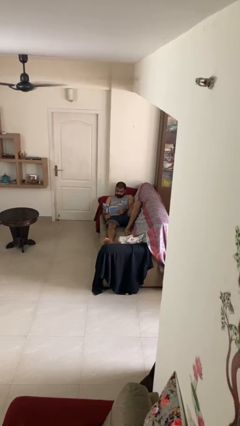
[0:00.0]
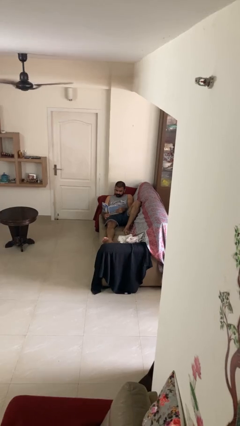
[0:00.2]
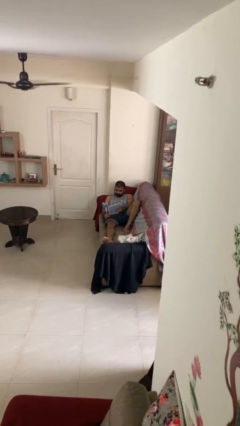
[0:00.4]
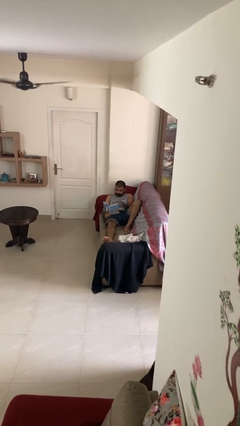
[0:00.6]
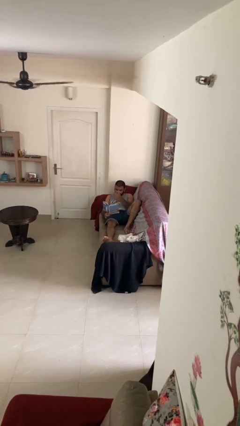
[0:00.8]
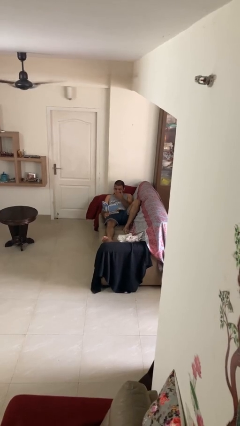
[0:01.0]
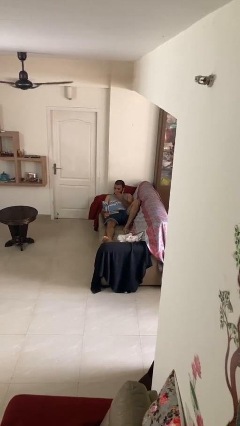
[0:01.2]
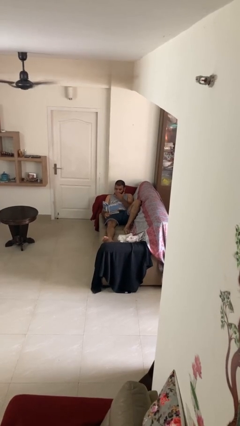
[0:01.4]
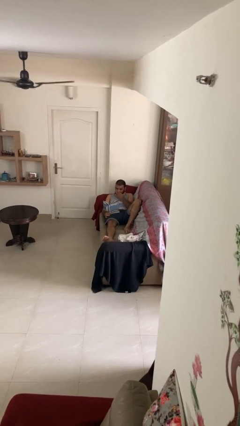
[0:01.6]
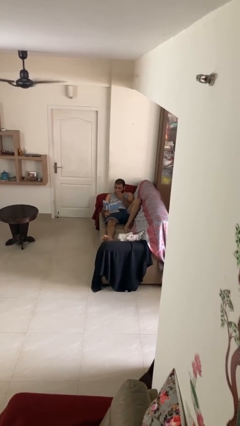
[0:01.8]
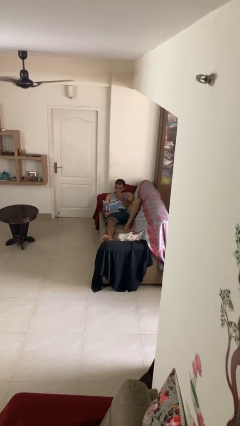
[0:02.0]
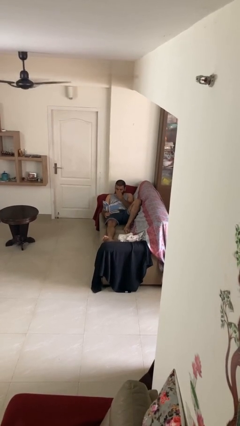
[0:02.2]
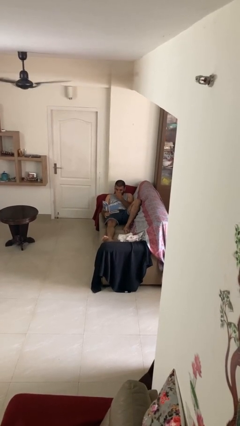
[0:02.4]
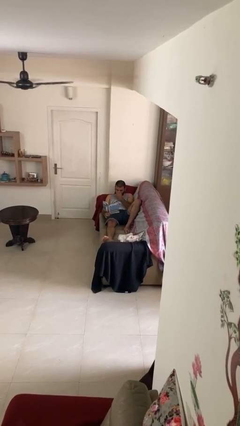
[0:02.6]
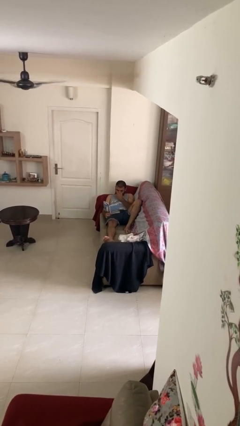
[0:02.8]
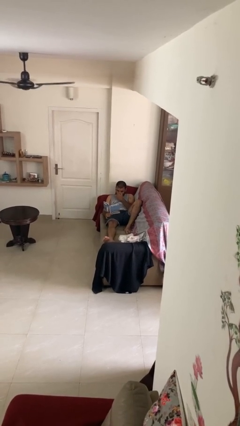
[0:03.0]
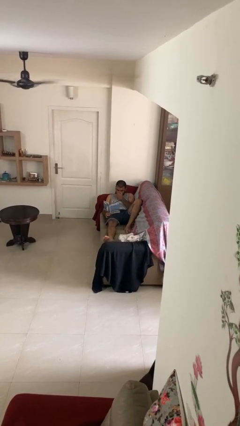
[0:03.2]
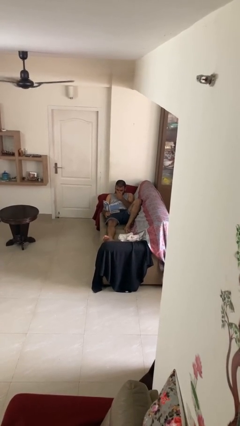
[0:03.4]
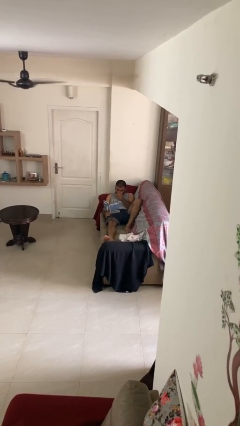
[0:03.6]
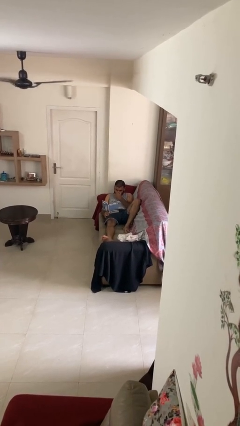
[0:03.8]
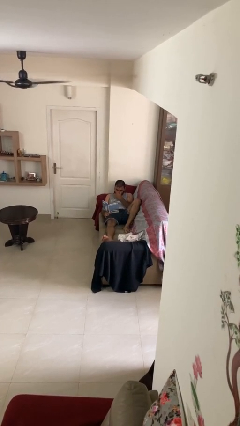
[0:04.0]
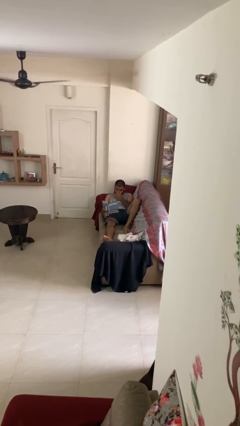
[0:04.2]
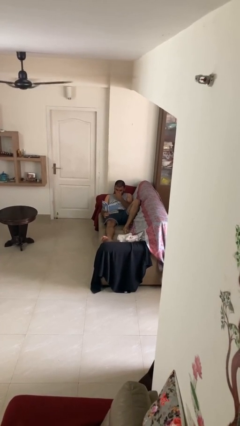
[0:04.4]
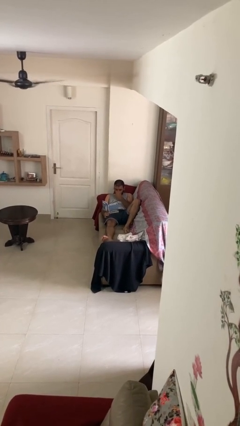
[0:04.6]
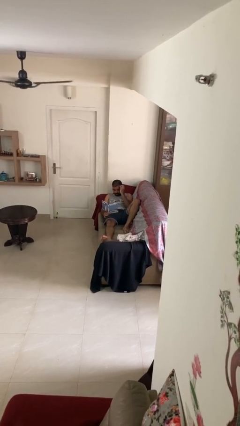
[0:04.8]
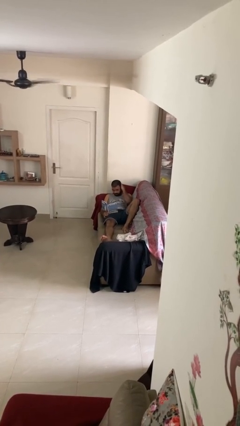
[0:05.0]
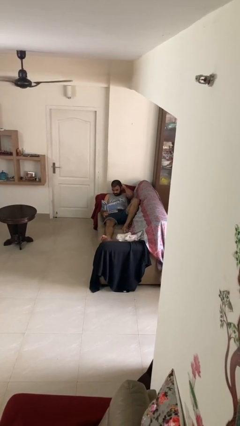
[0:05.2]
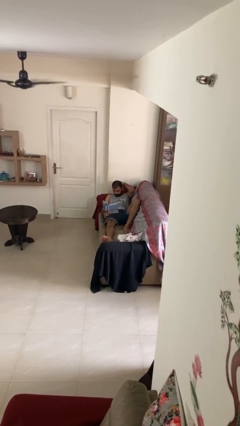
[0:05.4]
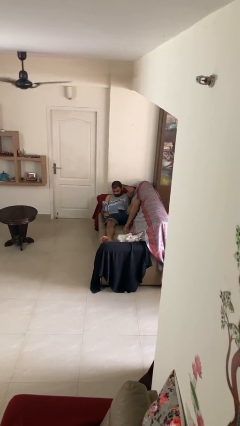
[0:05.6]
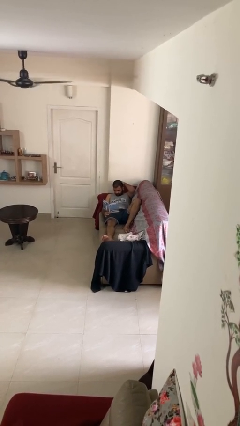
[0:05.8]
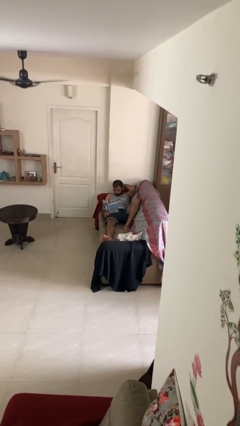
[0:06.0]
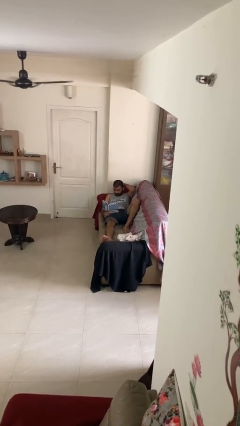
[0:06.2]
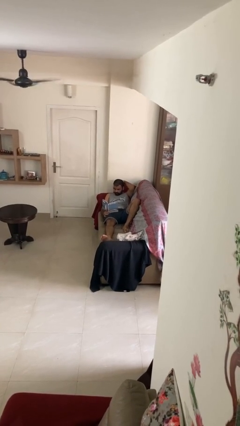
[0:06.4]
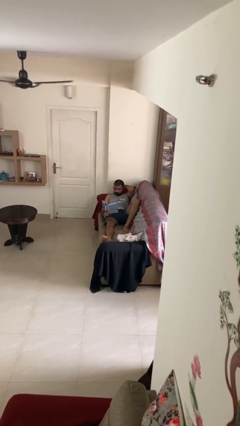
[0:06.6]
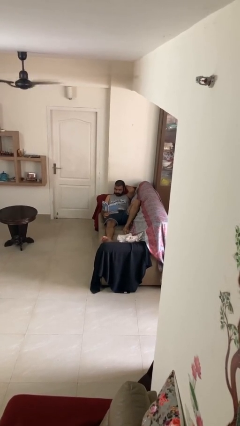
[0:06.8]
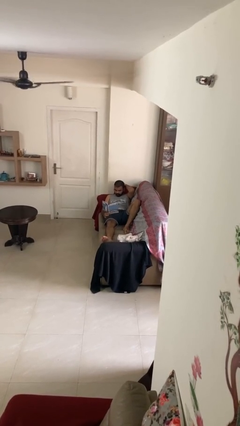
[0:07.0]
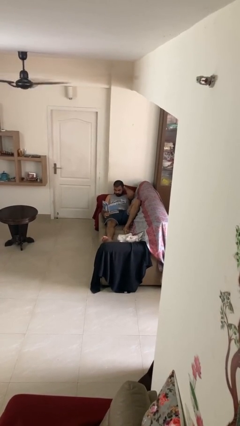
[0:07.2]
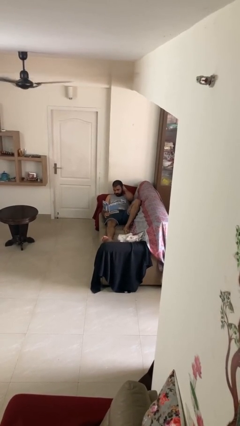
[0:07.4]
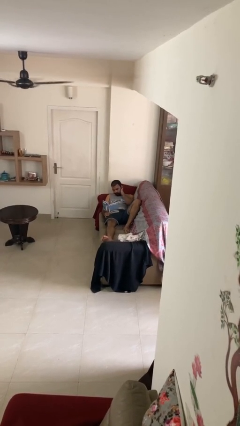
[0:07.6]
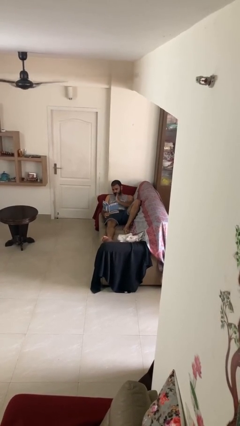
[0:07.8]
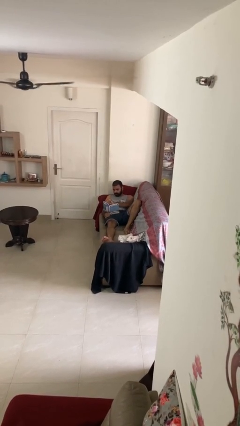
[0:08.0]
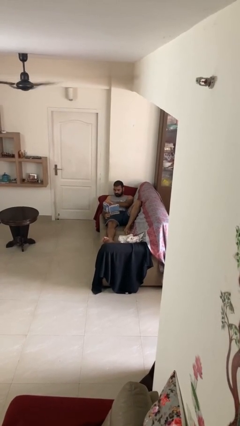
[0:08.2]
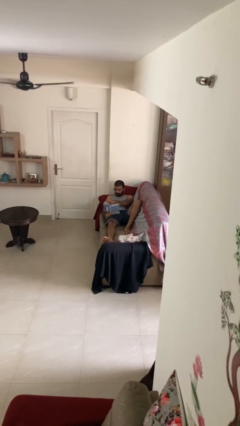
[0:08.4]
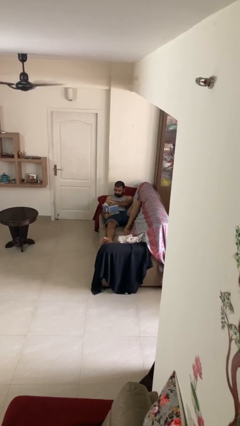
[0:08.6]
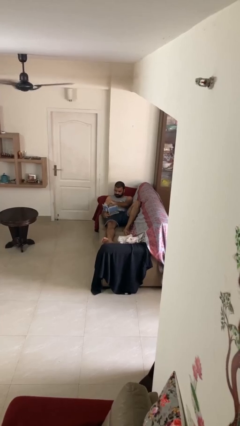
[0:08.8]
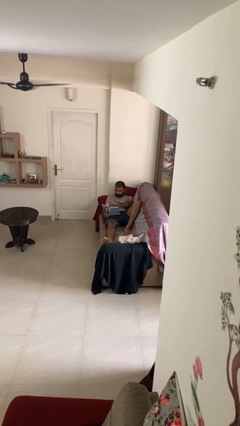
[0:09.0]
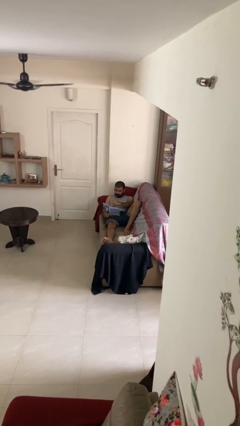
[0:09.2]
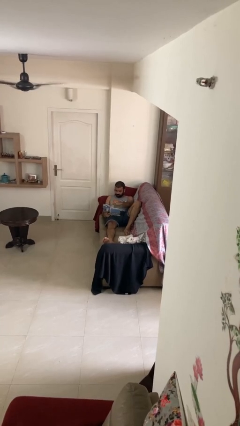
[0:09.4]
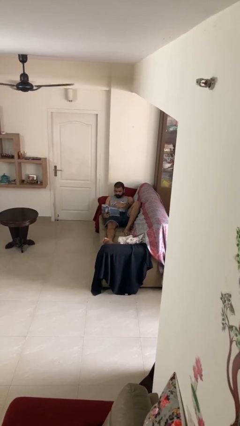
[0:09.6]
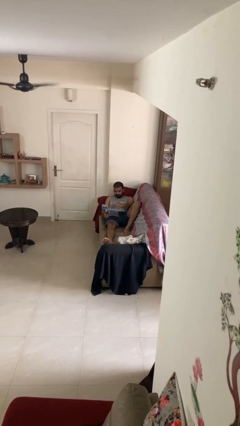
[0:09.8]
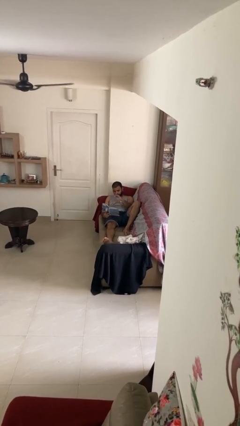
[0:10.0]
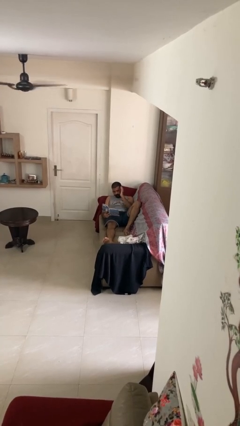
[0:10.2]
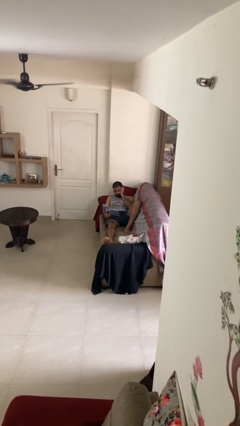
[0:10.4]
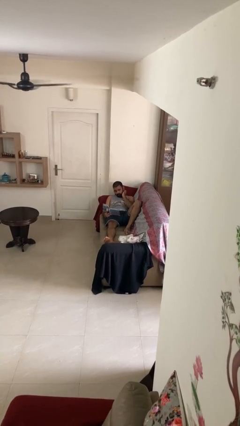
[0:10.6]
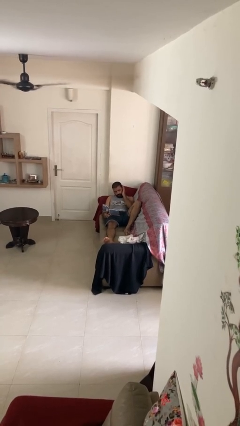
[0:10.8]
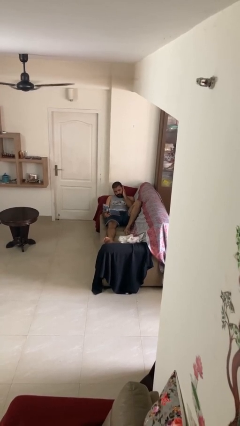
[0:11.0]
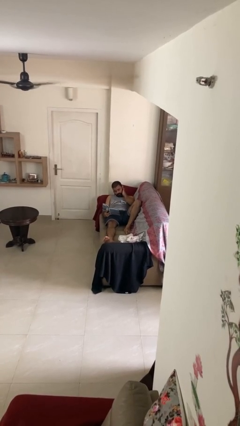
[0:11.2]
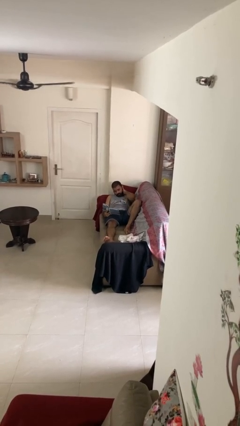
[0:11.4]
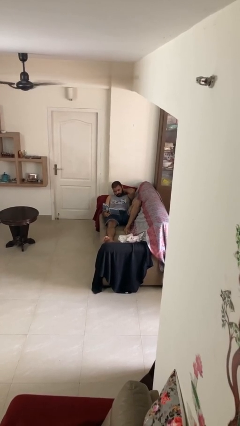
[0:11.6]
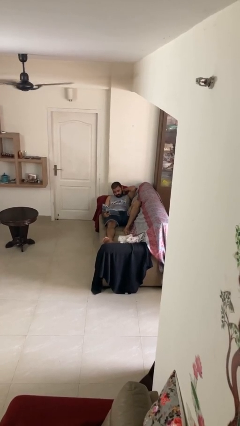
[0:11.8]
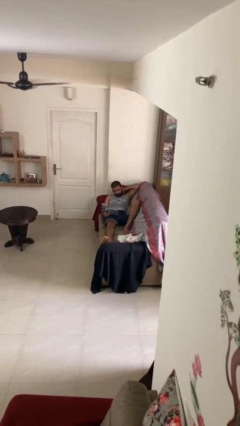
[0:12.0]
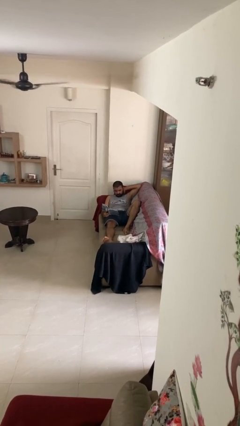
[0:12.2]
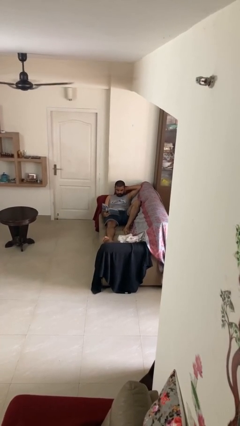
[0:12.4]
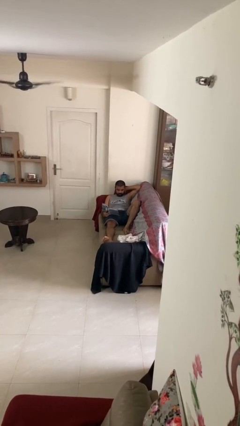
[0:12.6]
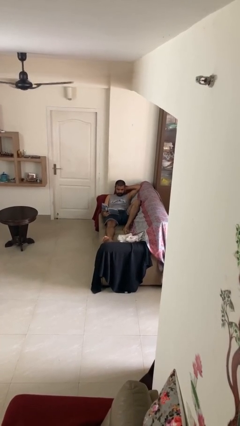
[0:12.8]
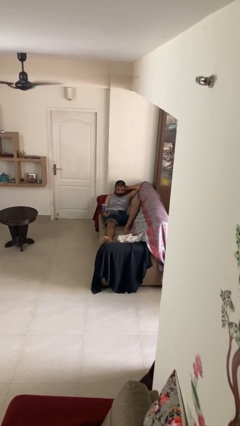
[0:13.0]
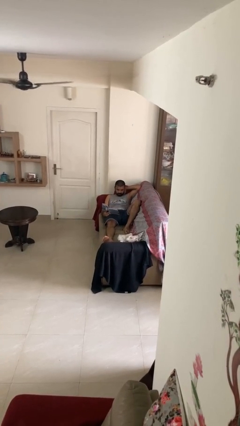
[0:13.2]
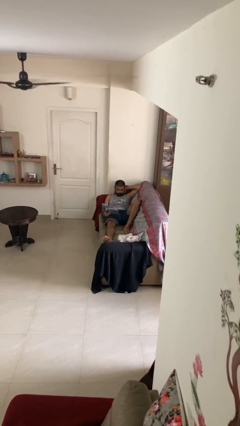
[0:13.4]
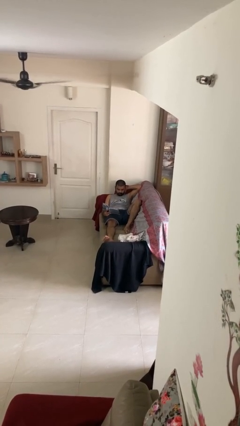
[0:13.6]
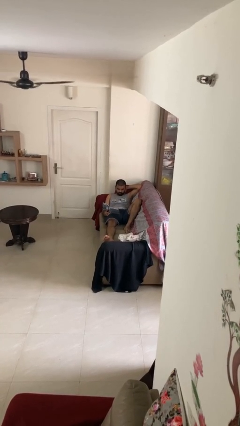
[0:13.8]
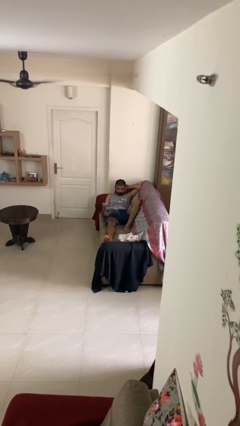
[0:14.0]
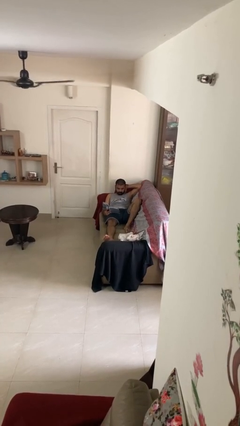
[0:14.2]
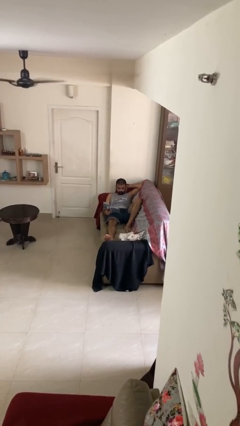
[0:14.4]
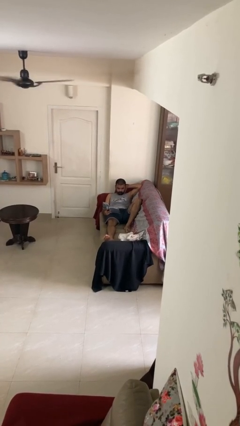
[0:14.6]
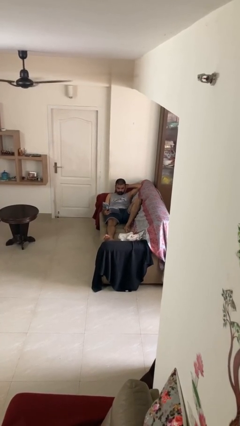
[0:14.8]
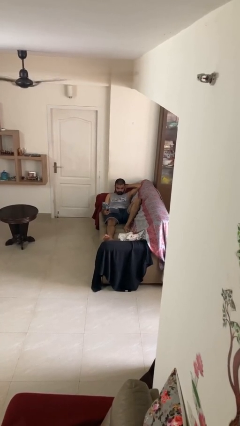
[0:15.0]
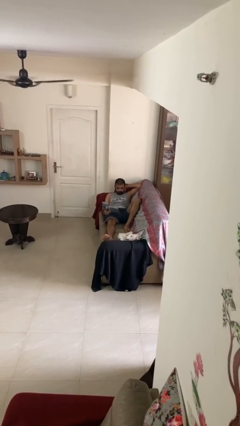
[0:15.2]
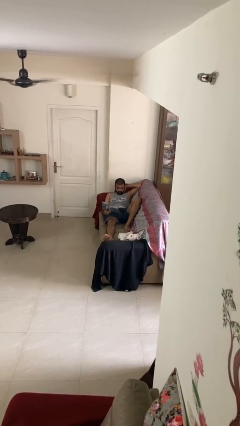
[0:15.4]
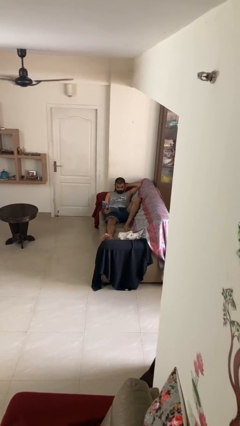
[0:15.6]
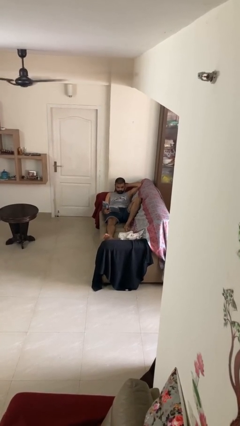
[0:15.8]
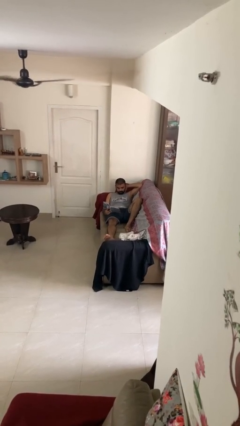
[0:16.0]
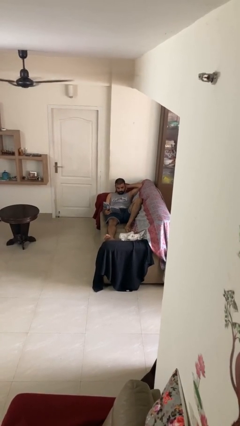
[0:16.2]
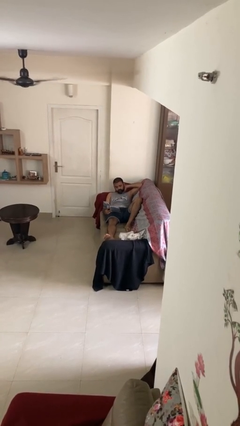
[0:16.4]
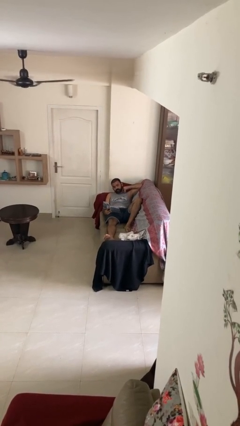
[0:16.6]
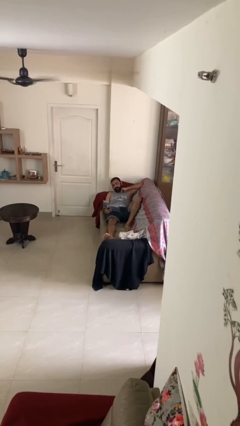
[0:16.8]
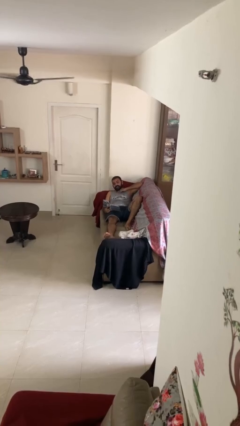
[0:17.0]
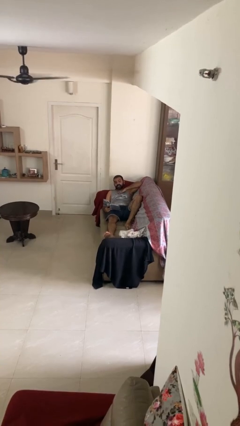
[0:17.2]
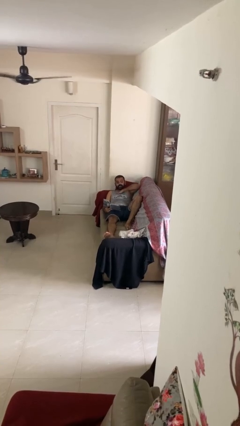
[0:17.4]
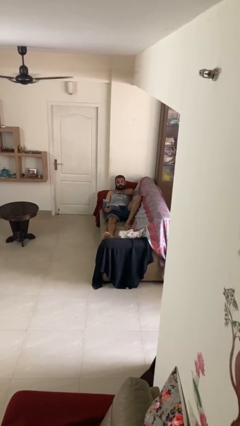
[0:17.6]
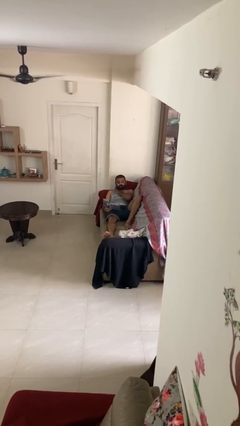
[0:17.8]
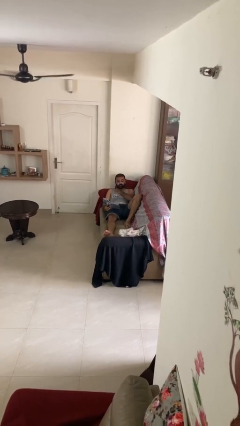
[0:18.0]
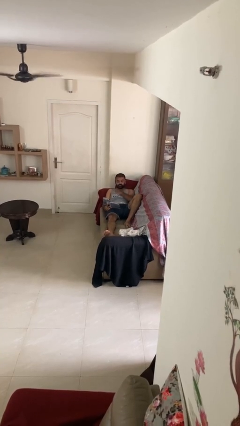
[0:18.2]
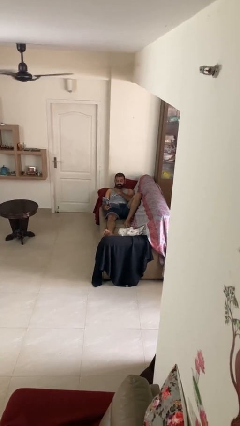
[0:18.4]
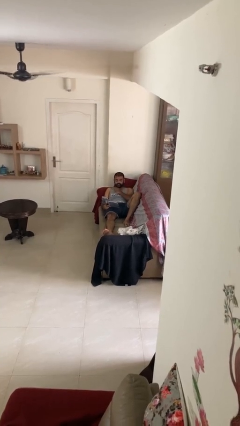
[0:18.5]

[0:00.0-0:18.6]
person reads document
